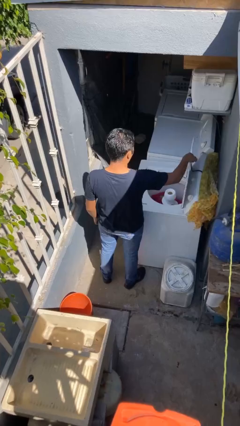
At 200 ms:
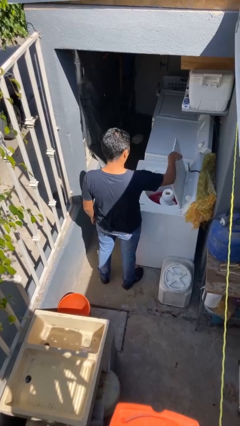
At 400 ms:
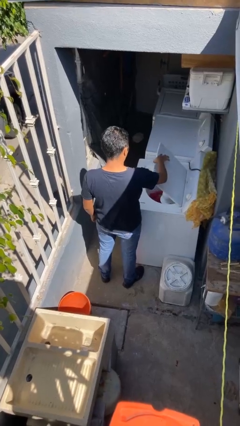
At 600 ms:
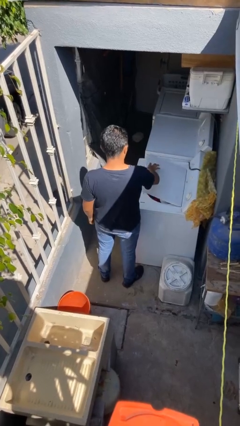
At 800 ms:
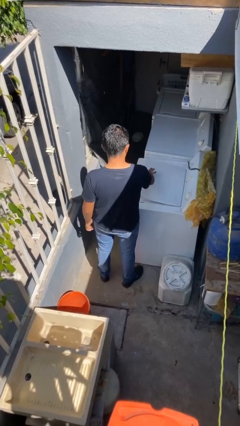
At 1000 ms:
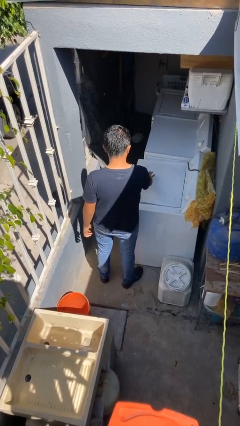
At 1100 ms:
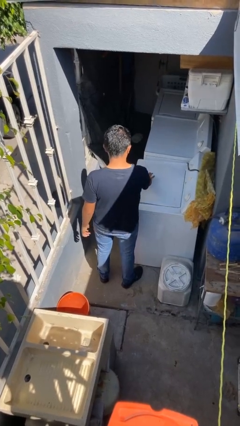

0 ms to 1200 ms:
person closes clothes washer

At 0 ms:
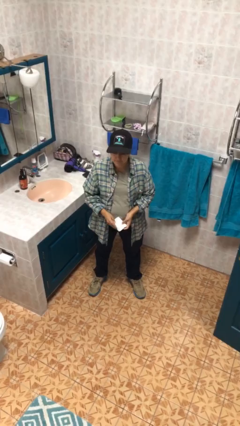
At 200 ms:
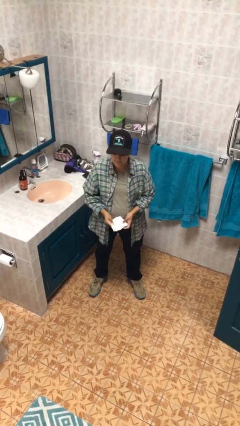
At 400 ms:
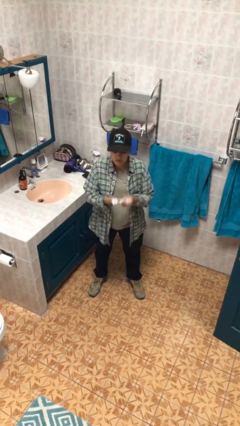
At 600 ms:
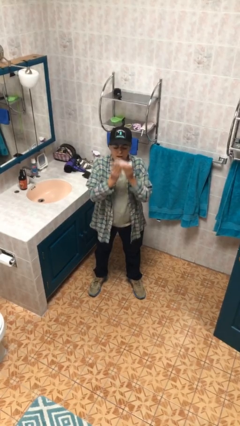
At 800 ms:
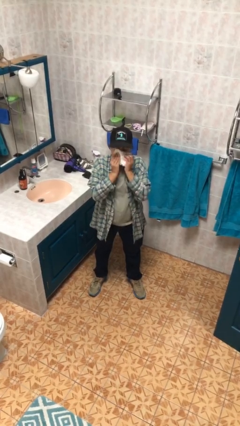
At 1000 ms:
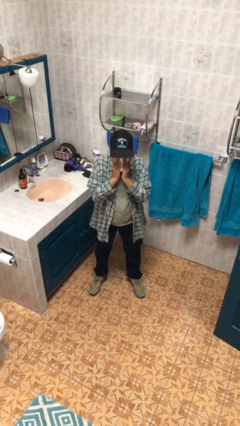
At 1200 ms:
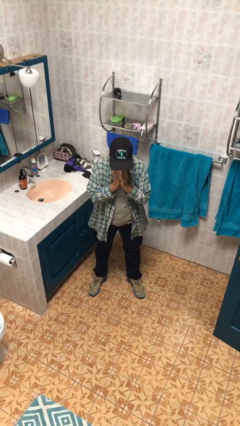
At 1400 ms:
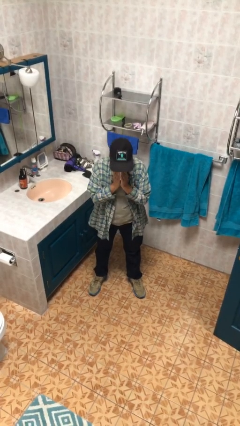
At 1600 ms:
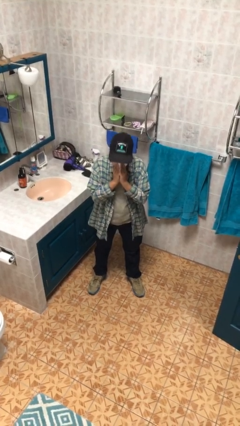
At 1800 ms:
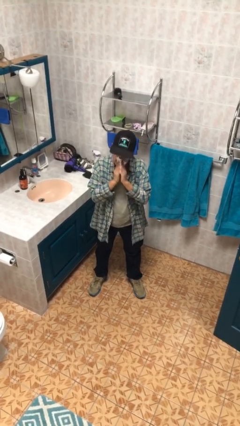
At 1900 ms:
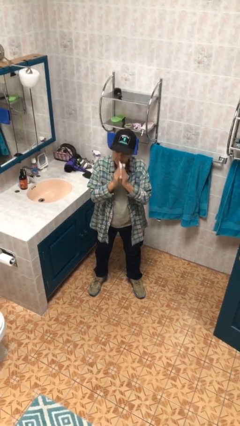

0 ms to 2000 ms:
person blows nose

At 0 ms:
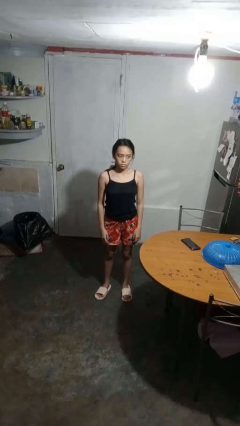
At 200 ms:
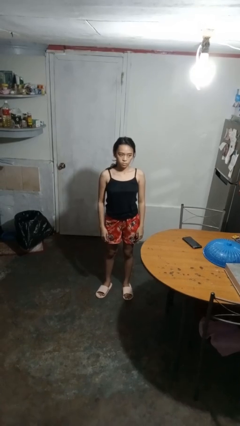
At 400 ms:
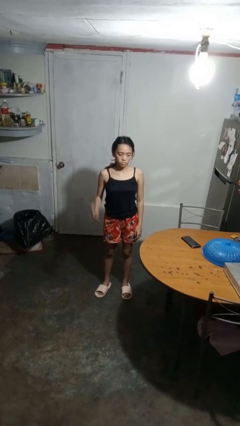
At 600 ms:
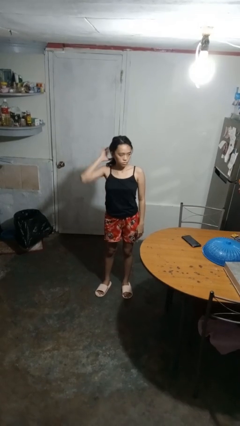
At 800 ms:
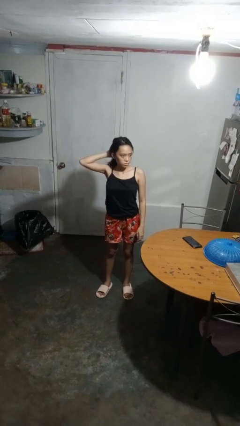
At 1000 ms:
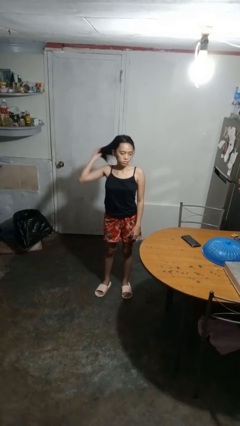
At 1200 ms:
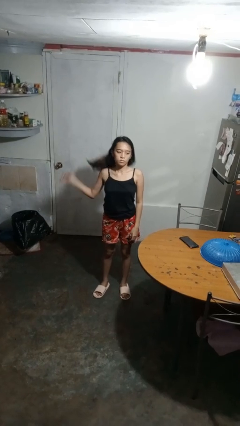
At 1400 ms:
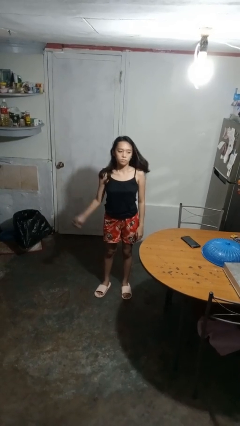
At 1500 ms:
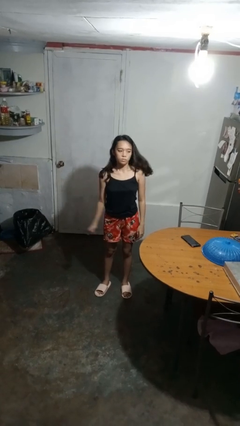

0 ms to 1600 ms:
person takes off hairtie

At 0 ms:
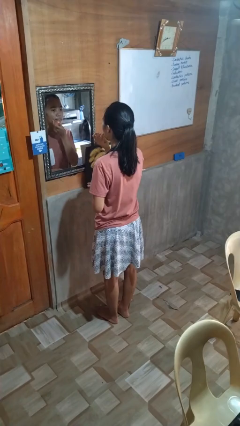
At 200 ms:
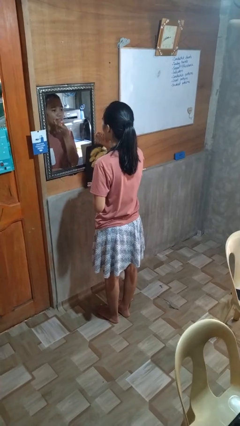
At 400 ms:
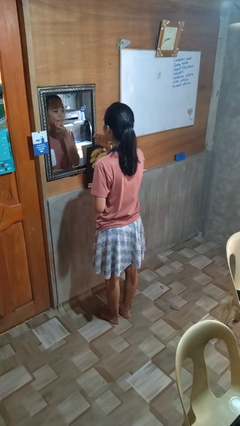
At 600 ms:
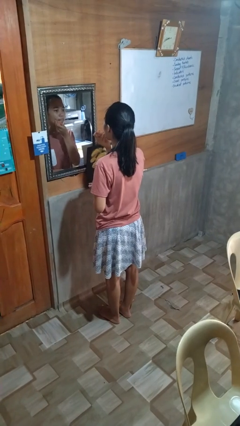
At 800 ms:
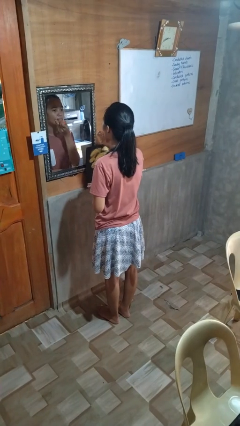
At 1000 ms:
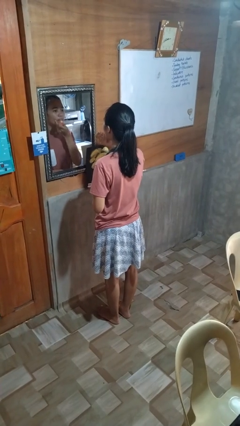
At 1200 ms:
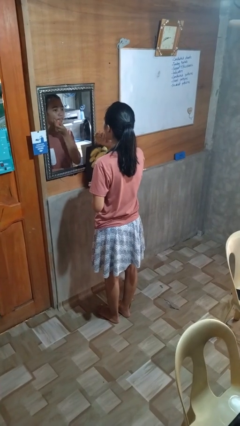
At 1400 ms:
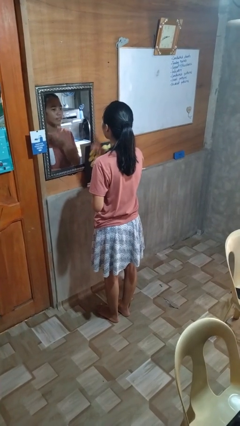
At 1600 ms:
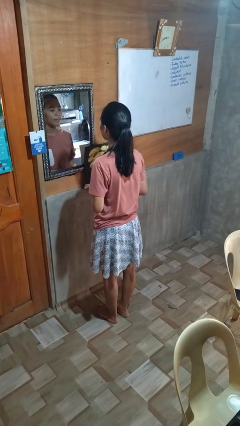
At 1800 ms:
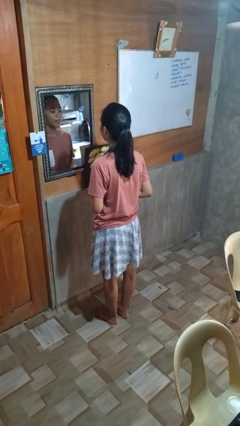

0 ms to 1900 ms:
person applies lip makeup

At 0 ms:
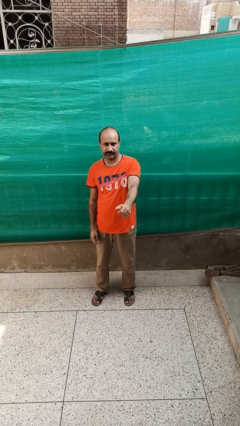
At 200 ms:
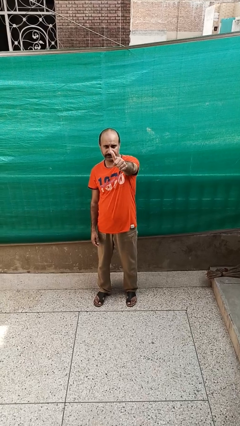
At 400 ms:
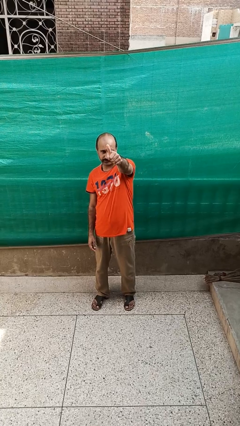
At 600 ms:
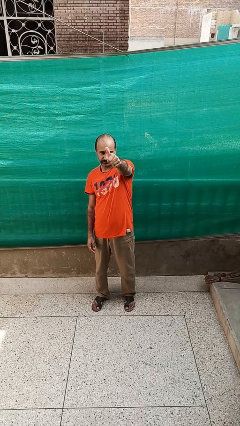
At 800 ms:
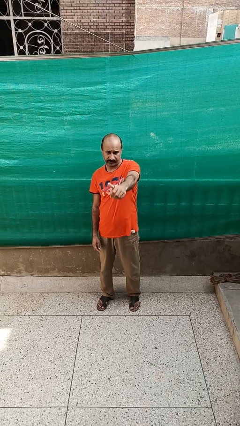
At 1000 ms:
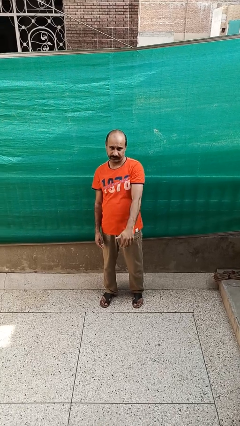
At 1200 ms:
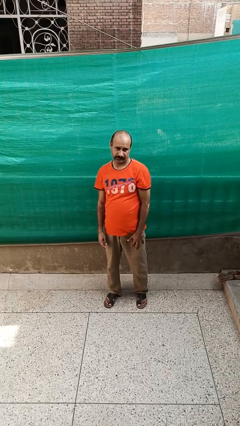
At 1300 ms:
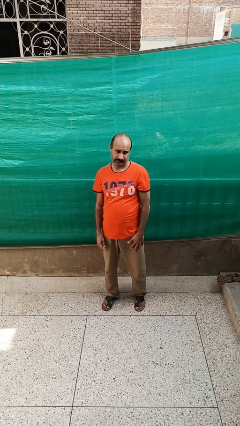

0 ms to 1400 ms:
person gestures thumbs up

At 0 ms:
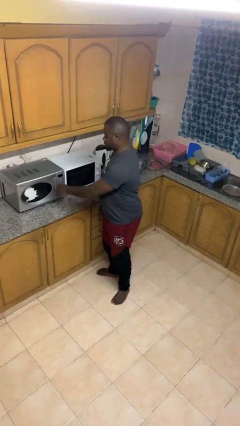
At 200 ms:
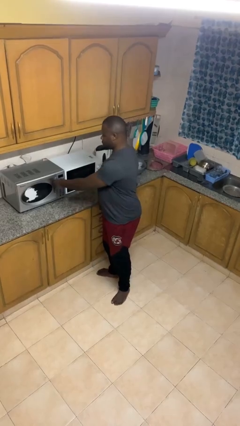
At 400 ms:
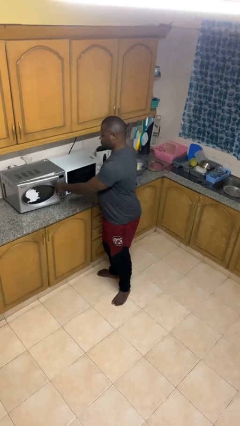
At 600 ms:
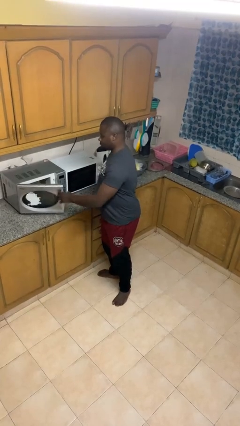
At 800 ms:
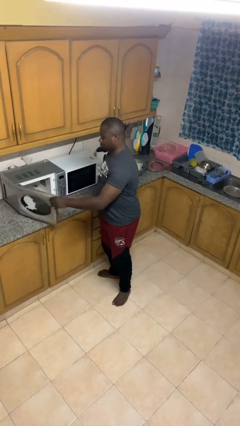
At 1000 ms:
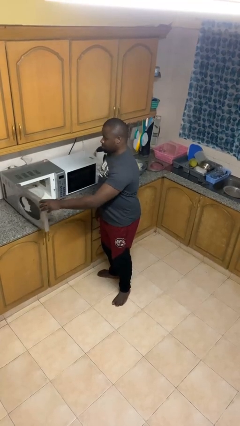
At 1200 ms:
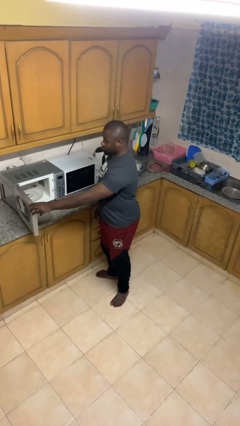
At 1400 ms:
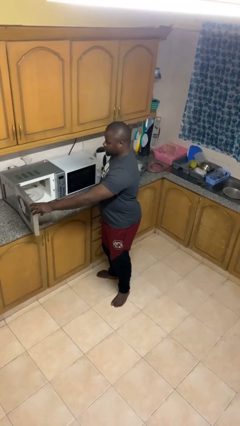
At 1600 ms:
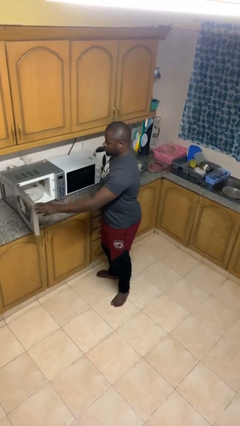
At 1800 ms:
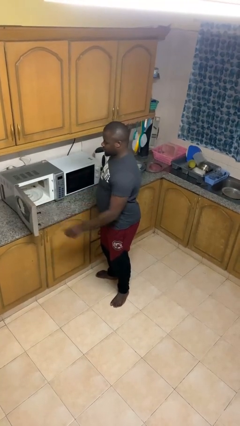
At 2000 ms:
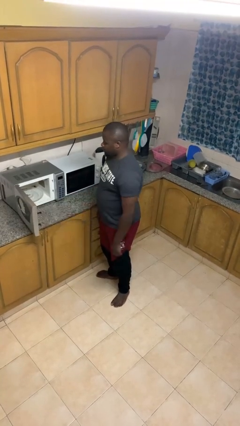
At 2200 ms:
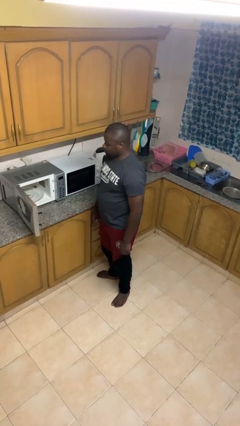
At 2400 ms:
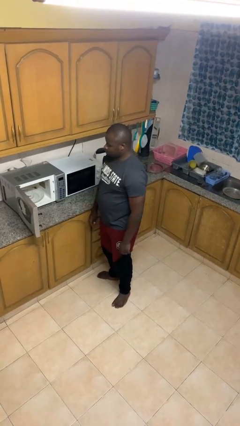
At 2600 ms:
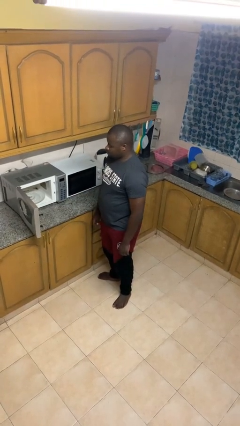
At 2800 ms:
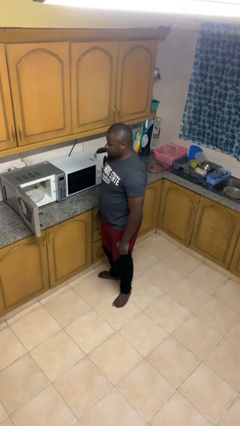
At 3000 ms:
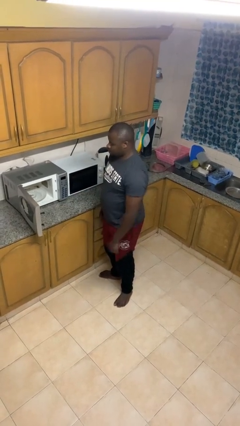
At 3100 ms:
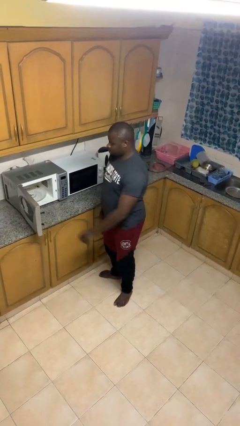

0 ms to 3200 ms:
person opens microwave

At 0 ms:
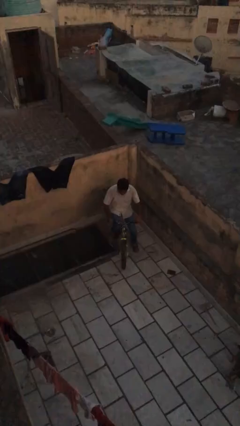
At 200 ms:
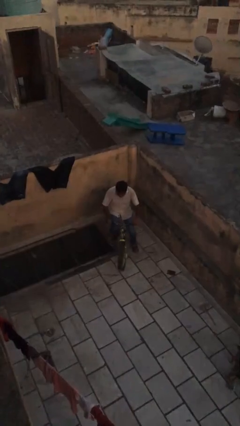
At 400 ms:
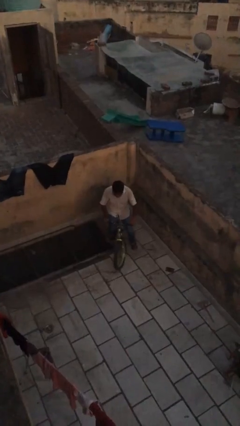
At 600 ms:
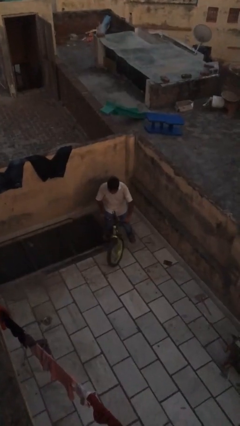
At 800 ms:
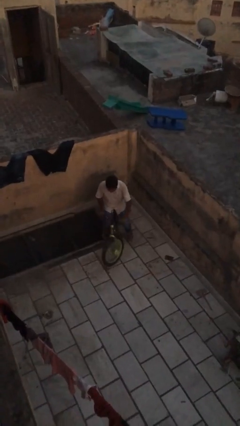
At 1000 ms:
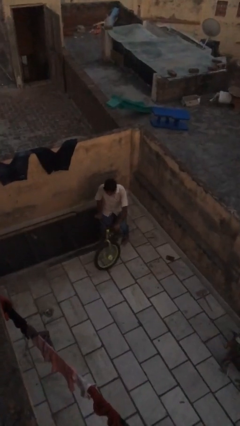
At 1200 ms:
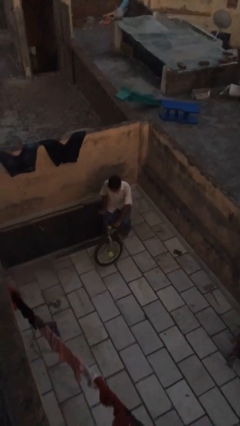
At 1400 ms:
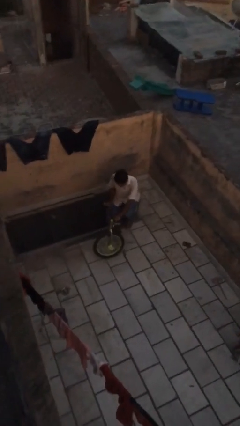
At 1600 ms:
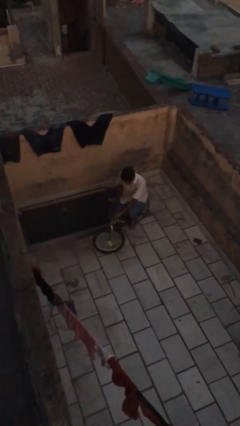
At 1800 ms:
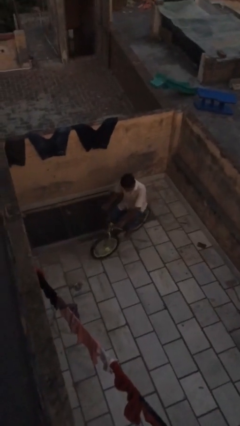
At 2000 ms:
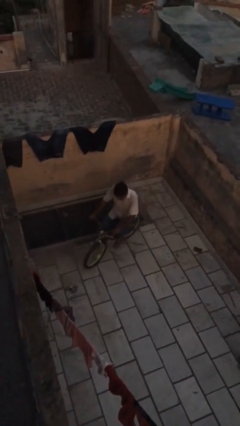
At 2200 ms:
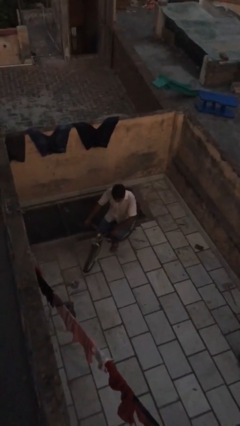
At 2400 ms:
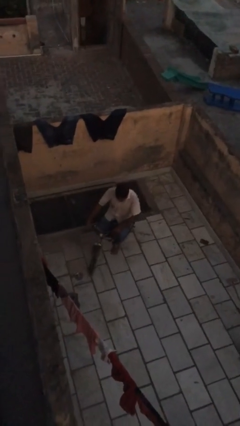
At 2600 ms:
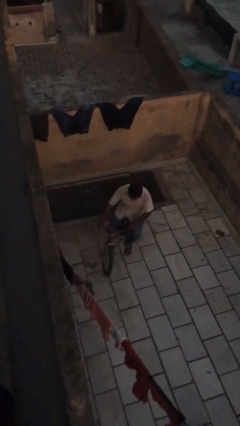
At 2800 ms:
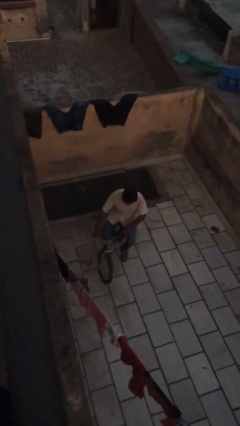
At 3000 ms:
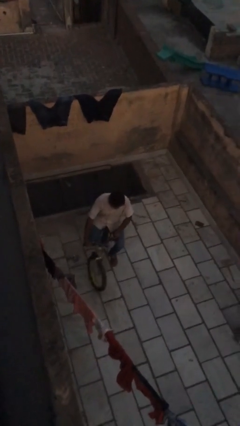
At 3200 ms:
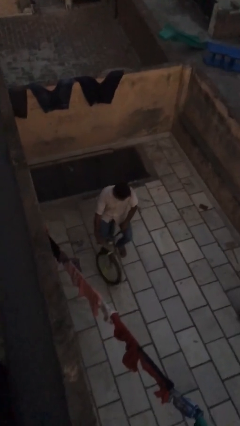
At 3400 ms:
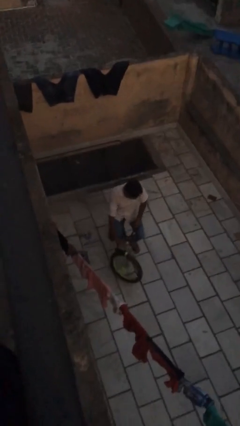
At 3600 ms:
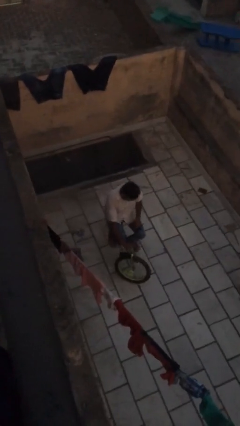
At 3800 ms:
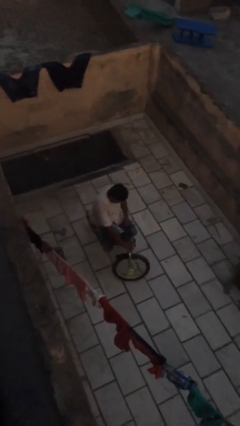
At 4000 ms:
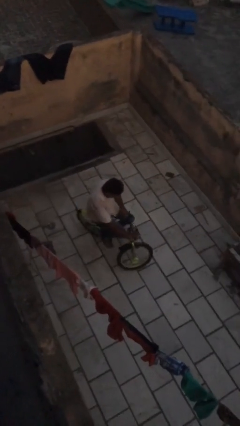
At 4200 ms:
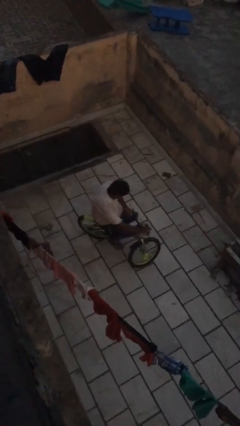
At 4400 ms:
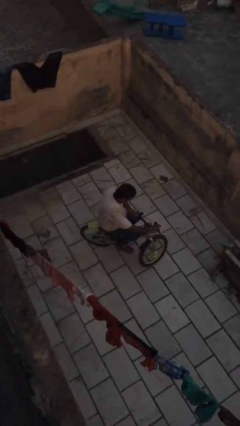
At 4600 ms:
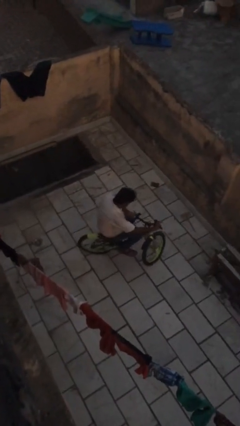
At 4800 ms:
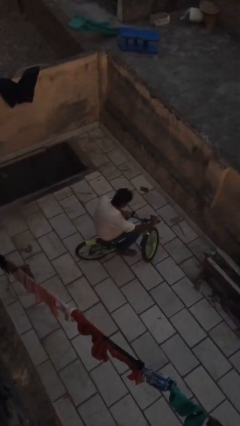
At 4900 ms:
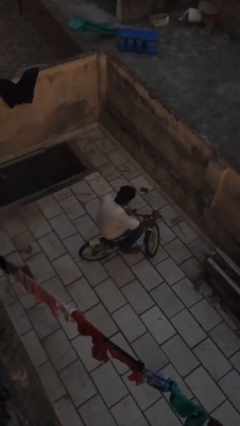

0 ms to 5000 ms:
person rides bicycle

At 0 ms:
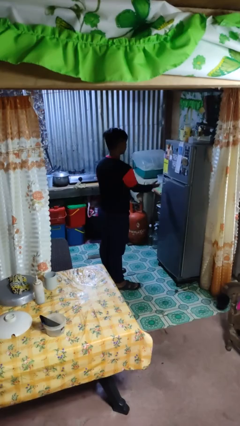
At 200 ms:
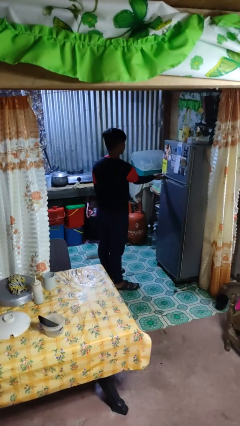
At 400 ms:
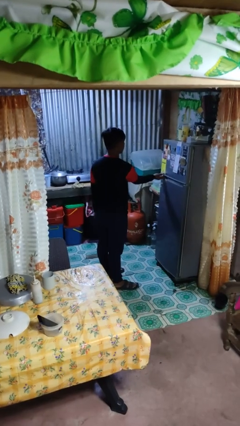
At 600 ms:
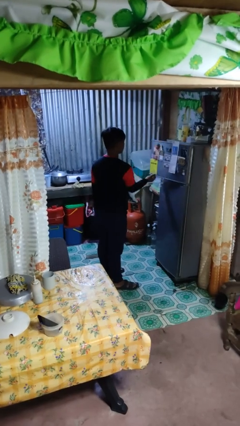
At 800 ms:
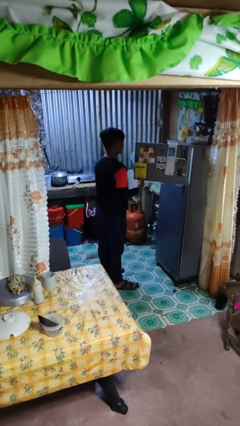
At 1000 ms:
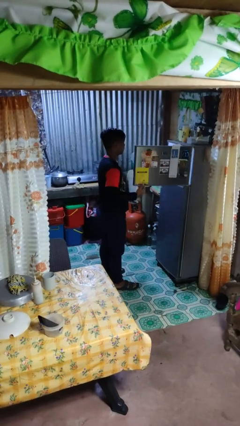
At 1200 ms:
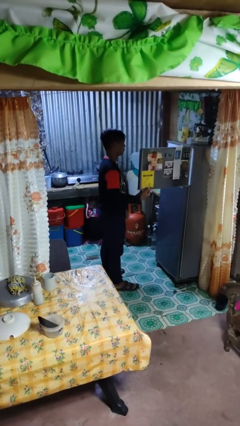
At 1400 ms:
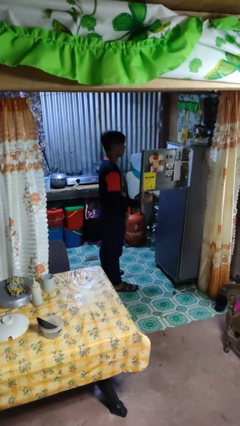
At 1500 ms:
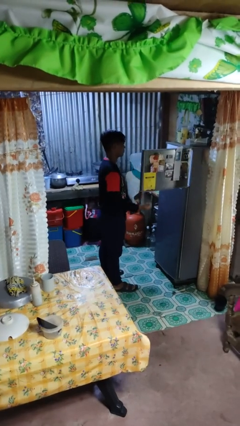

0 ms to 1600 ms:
person opens refrigerator
